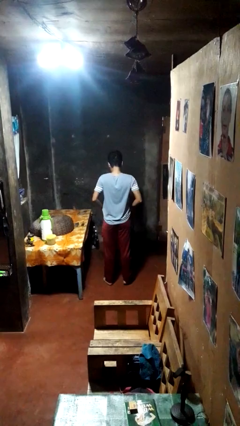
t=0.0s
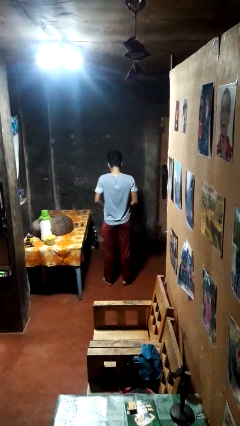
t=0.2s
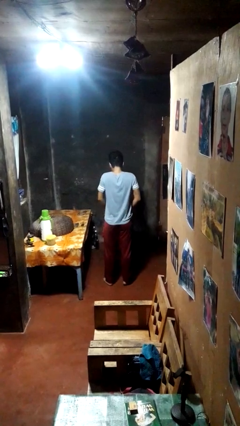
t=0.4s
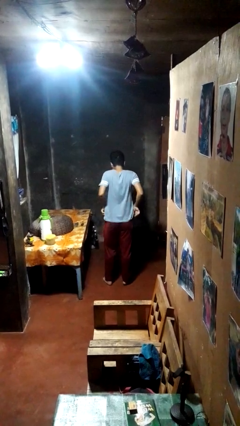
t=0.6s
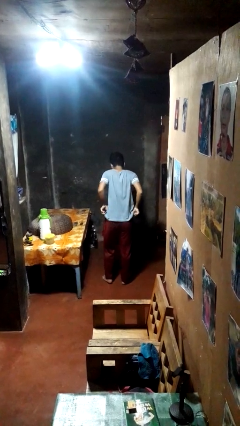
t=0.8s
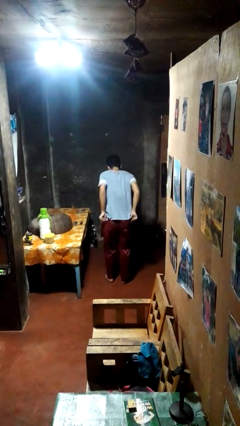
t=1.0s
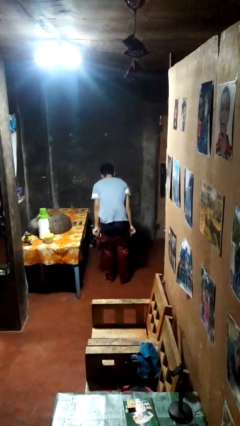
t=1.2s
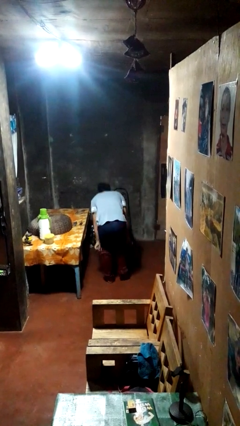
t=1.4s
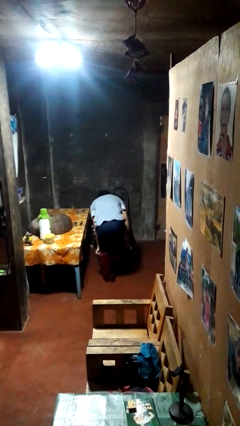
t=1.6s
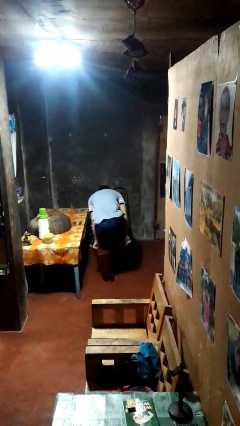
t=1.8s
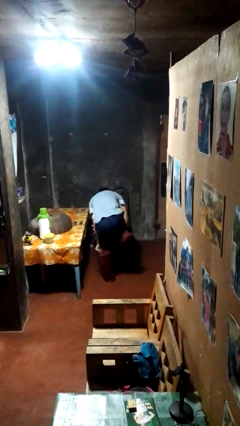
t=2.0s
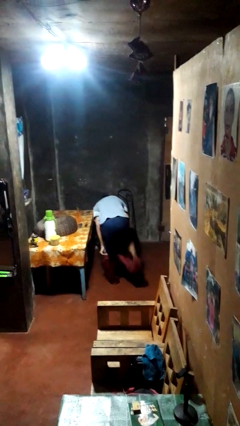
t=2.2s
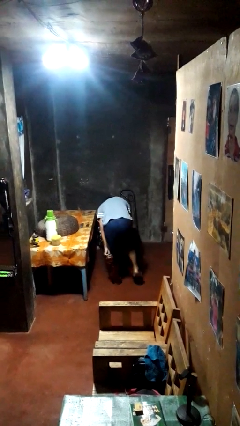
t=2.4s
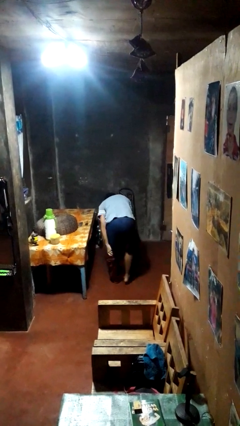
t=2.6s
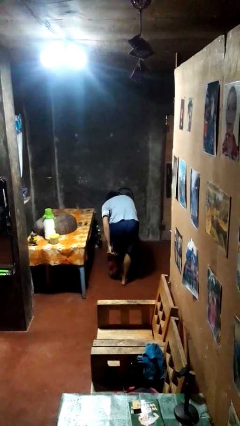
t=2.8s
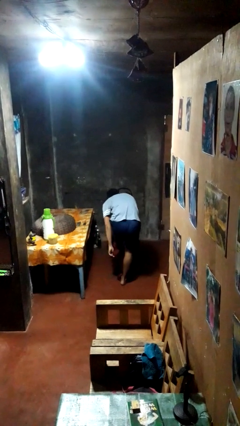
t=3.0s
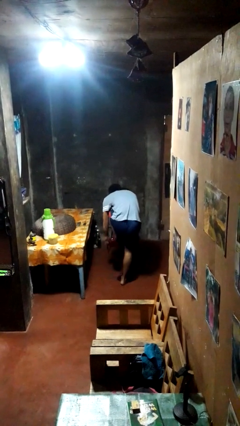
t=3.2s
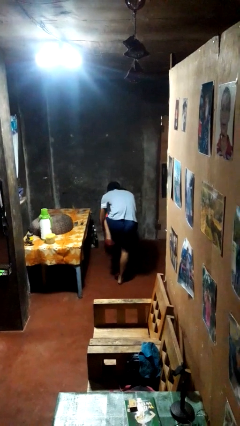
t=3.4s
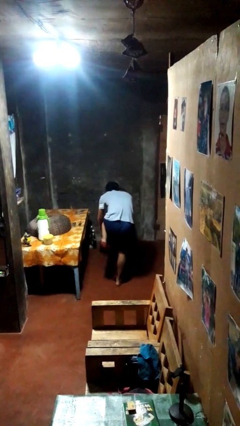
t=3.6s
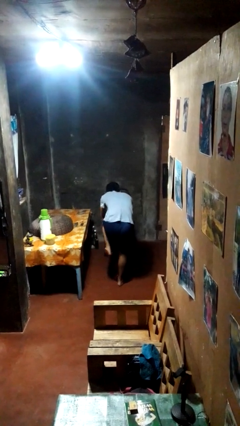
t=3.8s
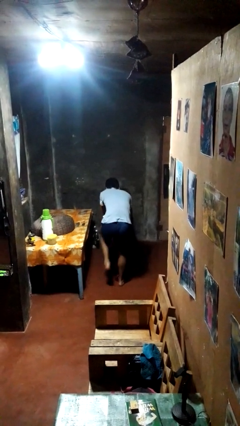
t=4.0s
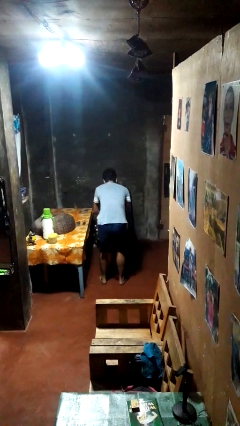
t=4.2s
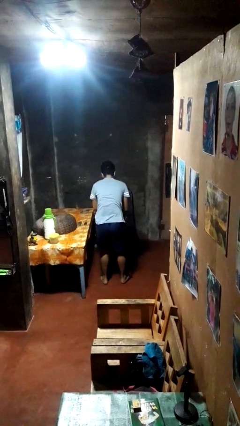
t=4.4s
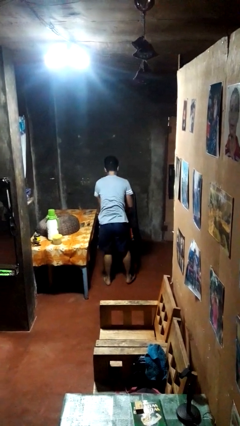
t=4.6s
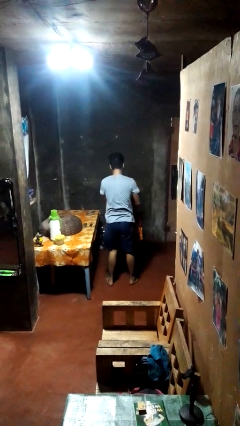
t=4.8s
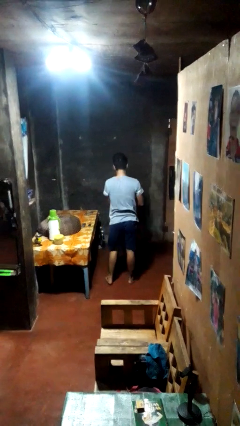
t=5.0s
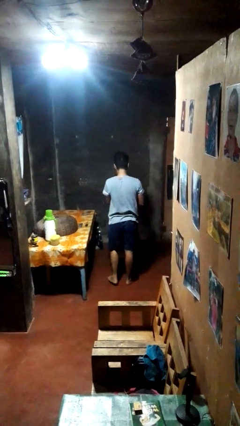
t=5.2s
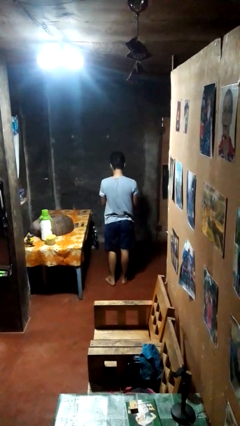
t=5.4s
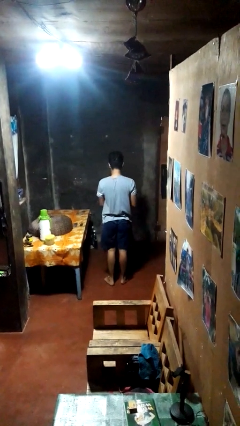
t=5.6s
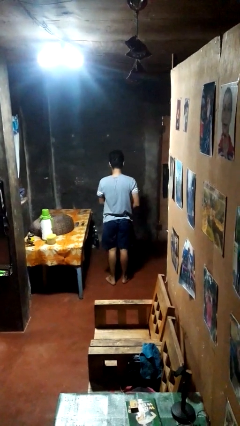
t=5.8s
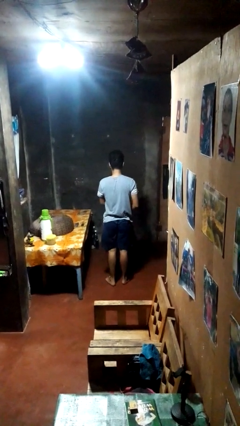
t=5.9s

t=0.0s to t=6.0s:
person takes off pants

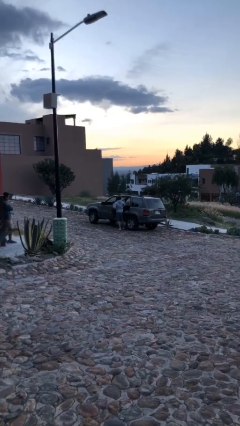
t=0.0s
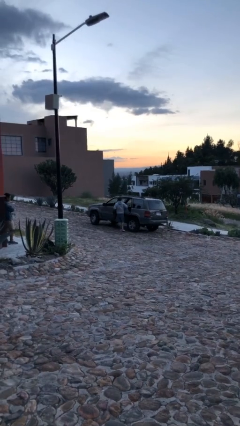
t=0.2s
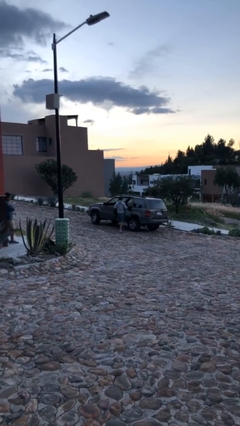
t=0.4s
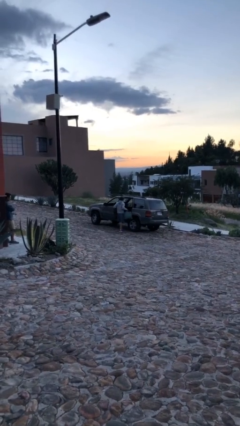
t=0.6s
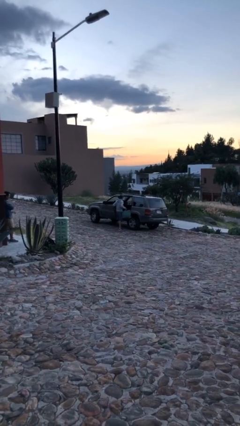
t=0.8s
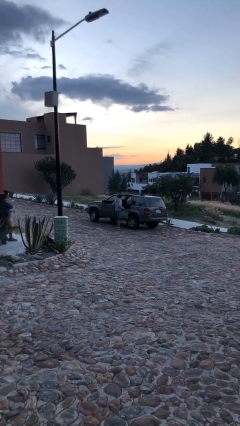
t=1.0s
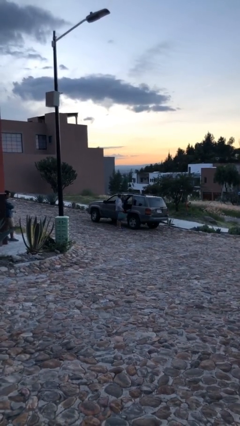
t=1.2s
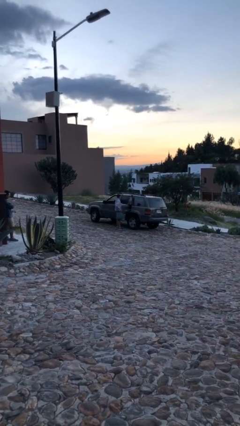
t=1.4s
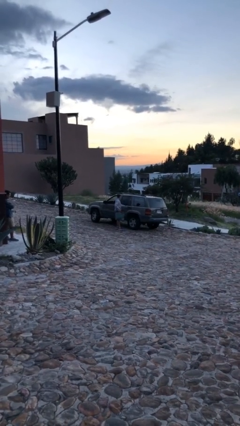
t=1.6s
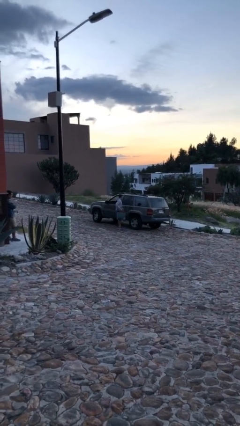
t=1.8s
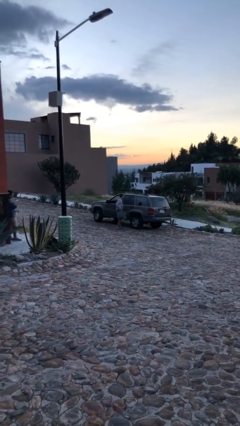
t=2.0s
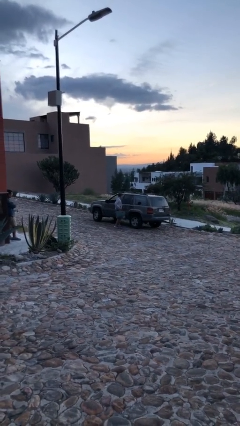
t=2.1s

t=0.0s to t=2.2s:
person closes car door

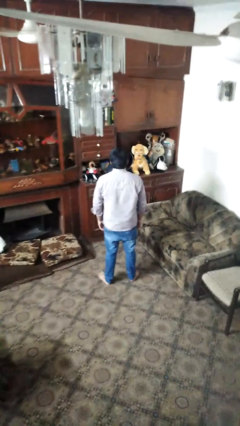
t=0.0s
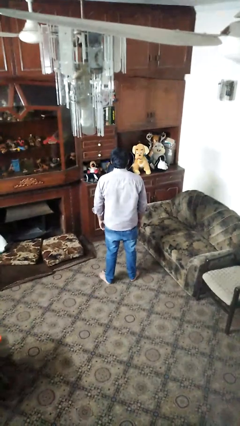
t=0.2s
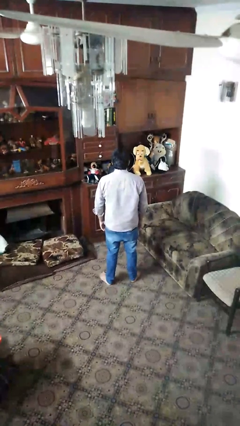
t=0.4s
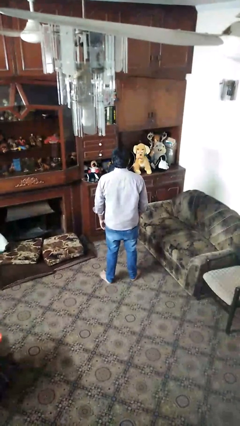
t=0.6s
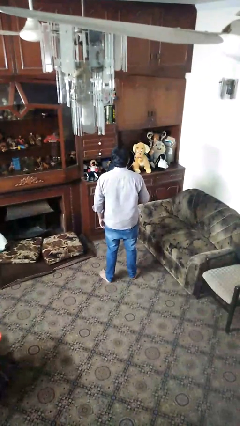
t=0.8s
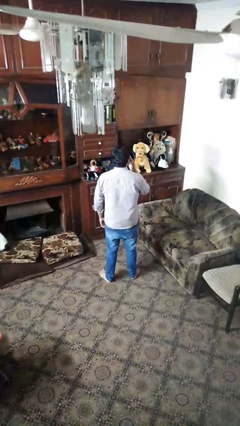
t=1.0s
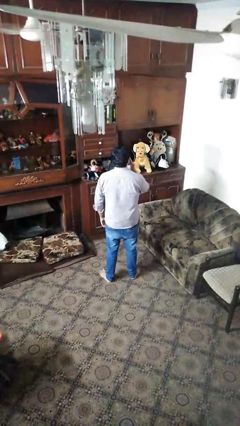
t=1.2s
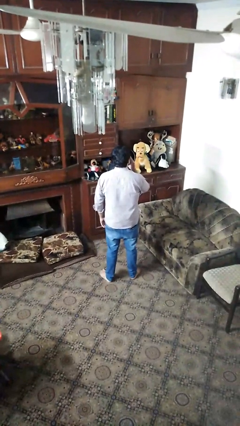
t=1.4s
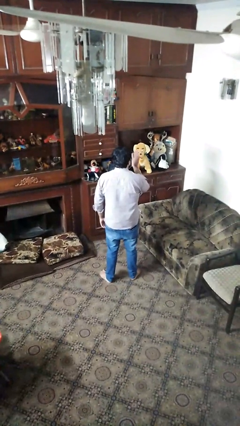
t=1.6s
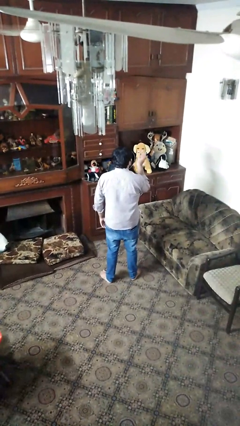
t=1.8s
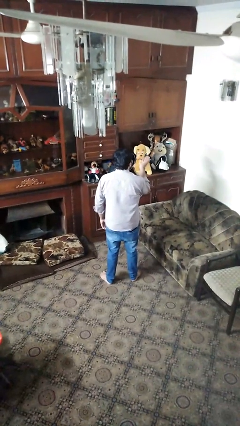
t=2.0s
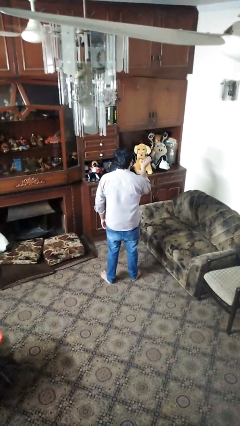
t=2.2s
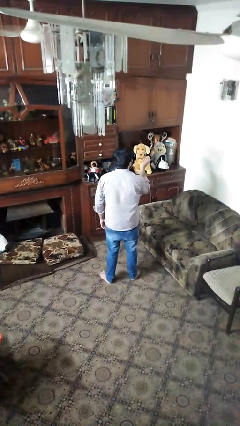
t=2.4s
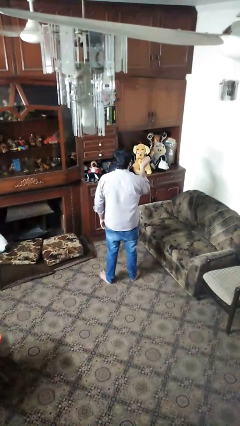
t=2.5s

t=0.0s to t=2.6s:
person gestures blow kiss

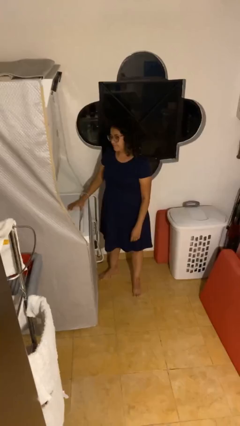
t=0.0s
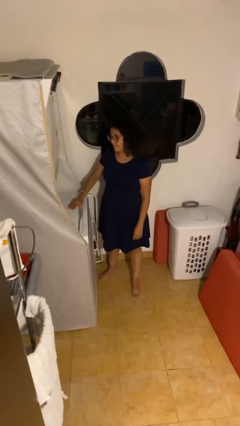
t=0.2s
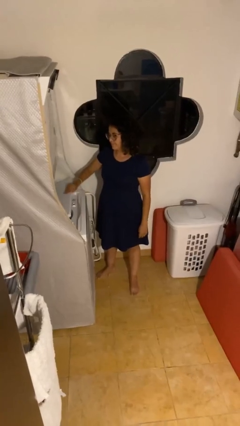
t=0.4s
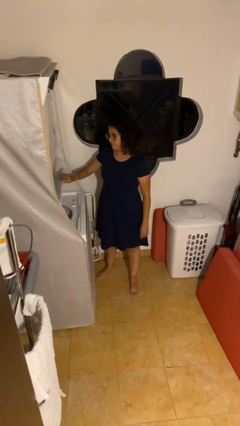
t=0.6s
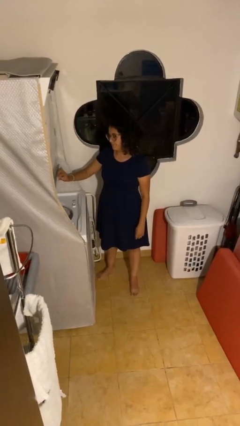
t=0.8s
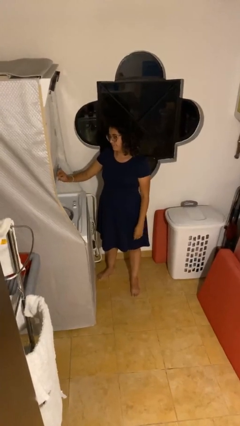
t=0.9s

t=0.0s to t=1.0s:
person opens clothes washer

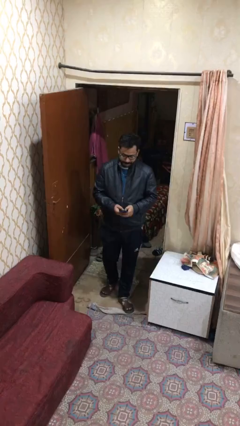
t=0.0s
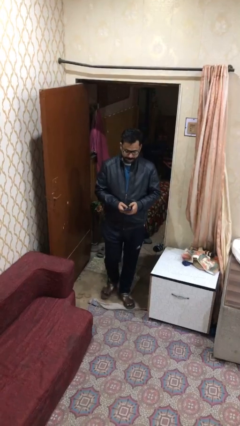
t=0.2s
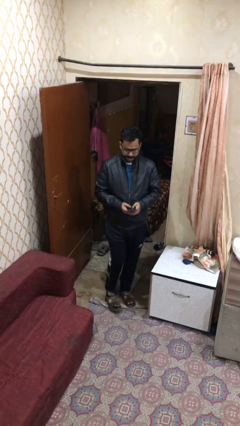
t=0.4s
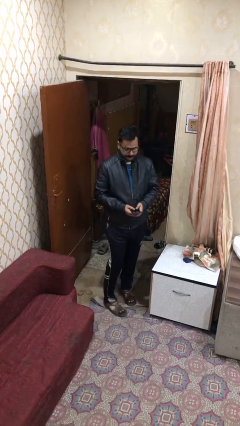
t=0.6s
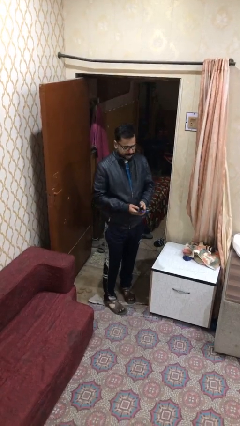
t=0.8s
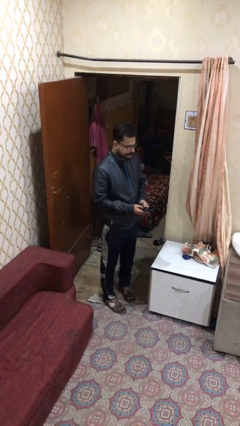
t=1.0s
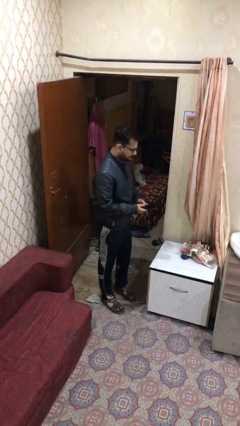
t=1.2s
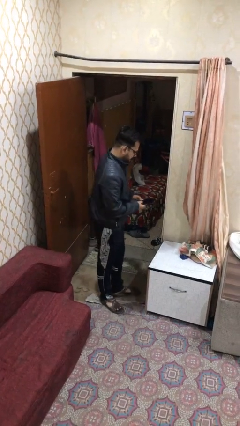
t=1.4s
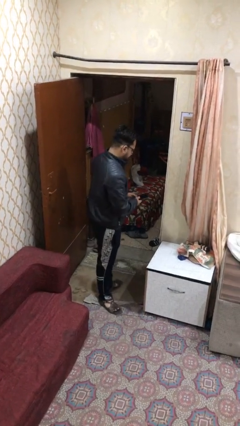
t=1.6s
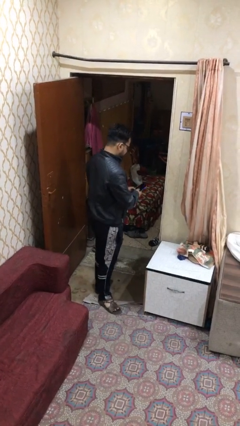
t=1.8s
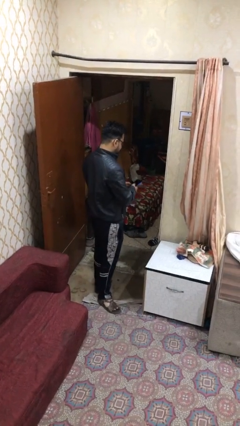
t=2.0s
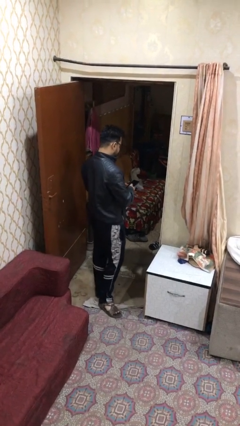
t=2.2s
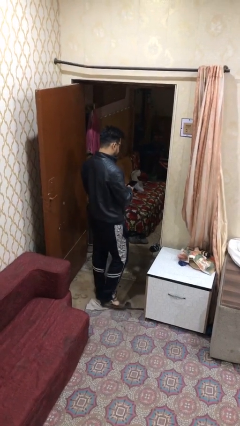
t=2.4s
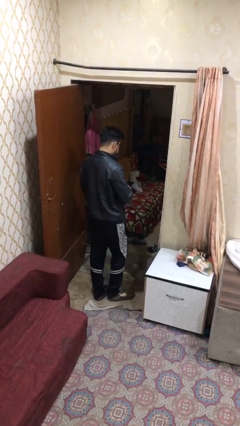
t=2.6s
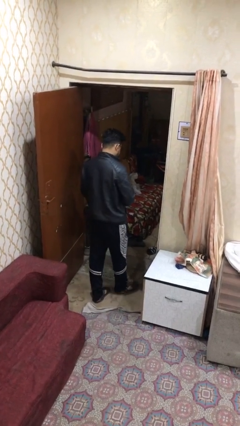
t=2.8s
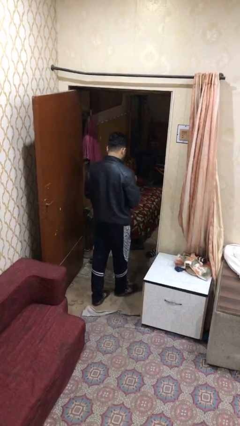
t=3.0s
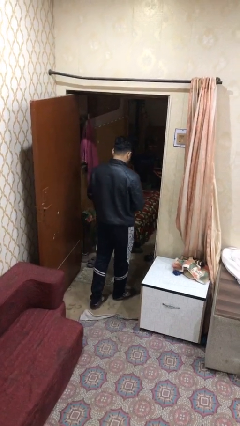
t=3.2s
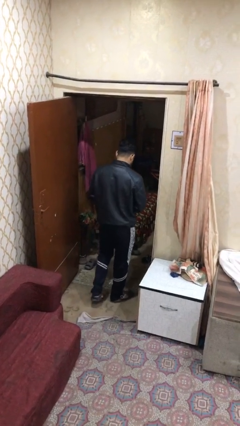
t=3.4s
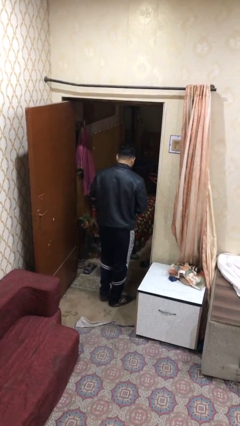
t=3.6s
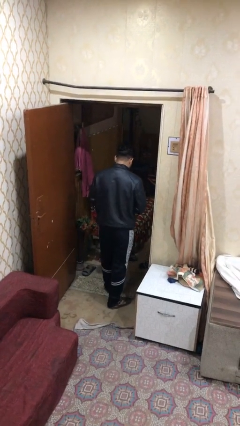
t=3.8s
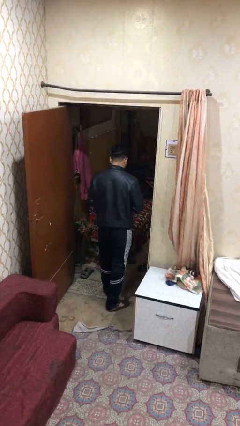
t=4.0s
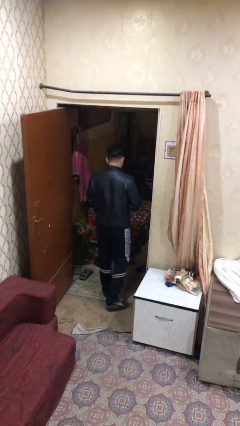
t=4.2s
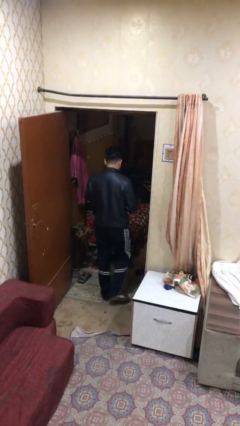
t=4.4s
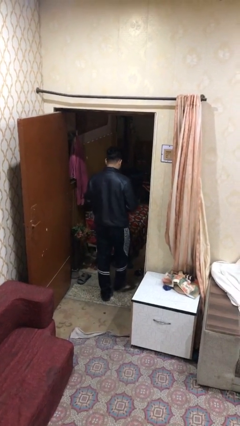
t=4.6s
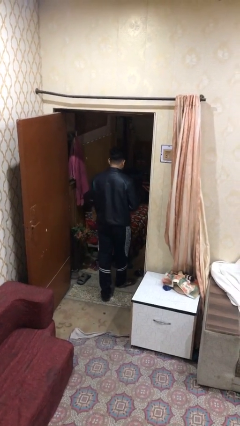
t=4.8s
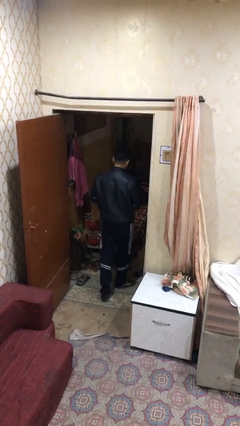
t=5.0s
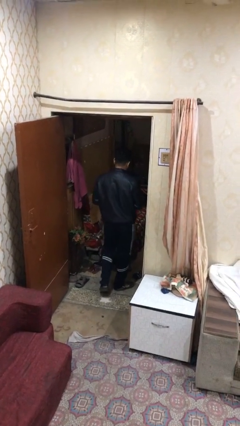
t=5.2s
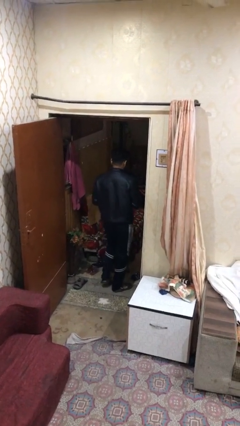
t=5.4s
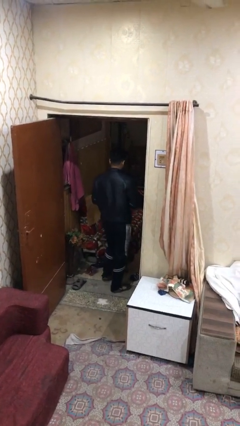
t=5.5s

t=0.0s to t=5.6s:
person exits scene through structure

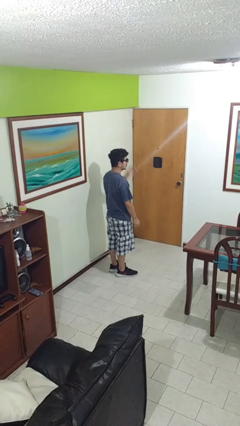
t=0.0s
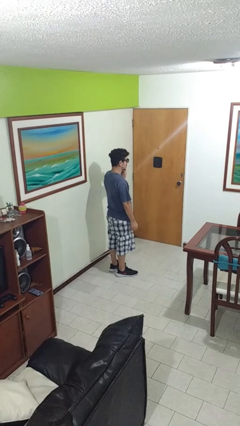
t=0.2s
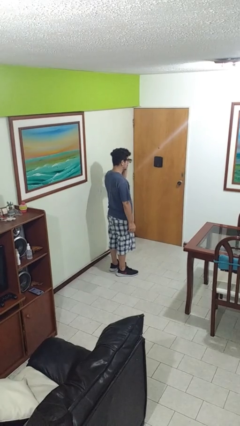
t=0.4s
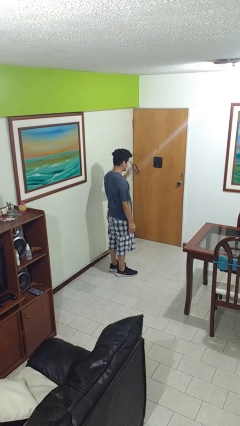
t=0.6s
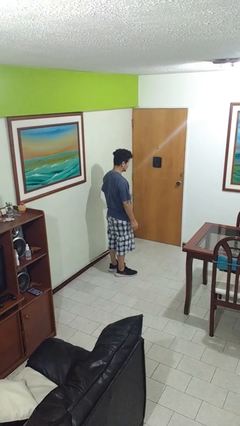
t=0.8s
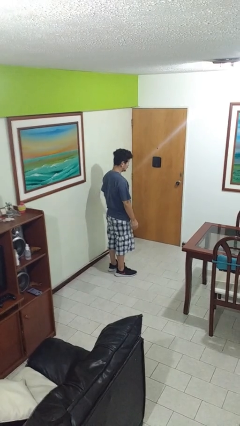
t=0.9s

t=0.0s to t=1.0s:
person takes off sunglasses
